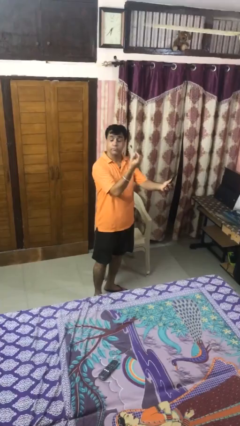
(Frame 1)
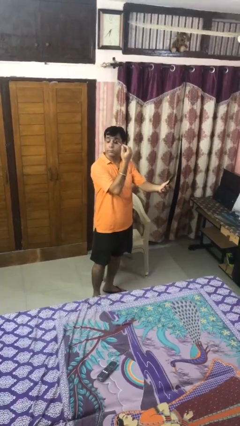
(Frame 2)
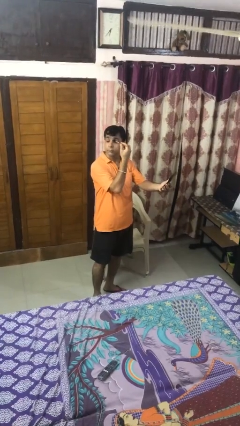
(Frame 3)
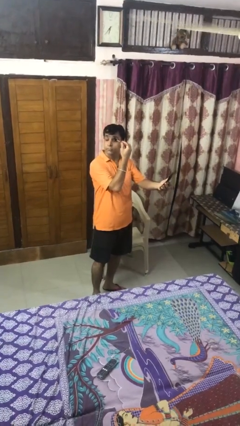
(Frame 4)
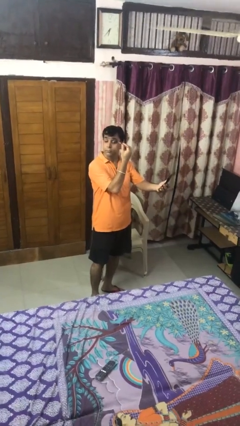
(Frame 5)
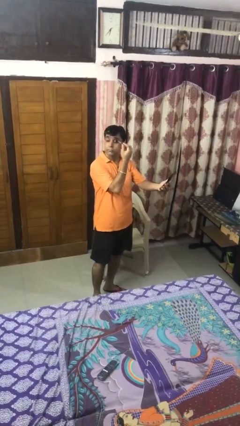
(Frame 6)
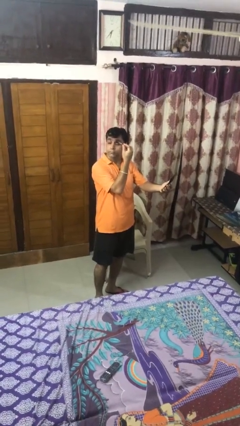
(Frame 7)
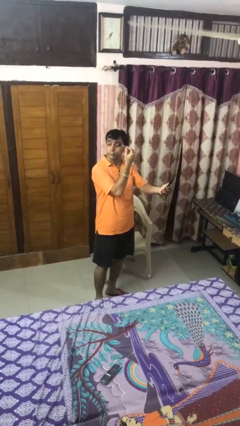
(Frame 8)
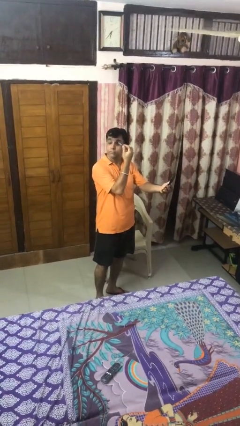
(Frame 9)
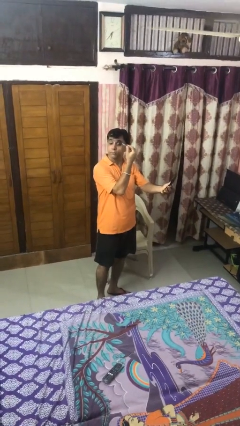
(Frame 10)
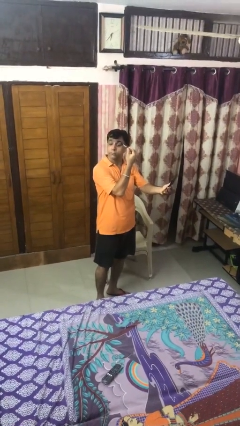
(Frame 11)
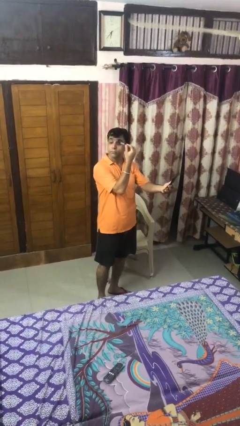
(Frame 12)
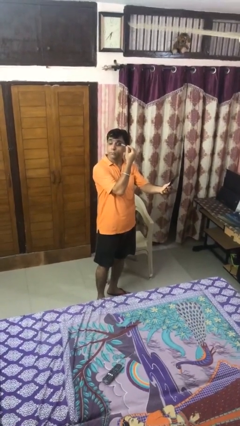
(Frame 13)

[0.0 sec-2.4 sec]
person applies eye makeup

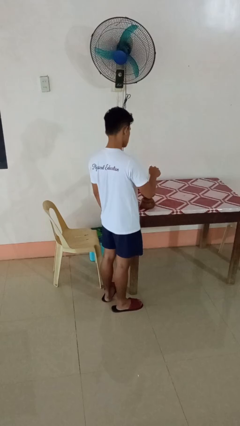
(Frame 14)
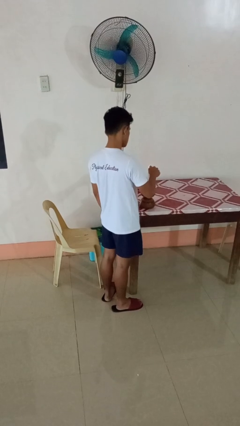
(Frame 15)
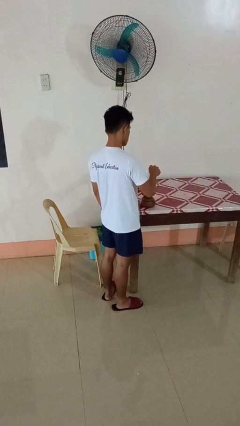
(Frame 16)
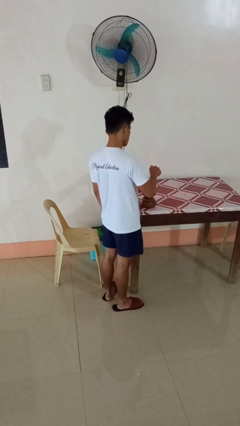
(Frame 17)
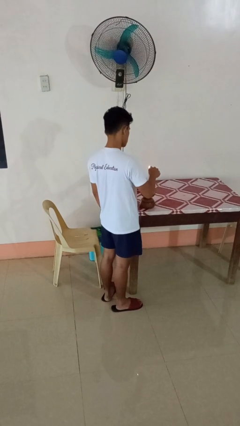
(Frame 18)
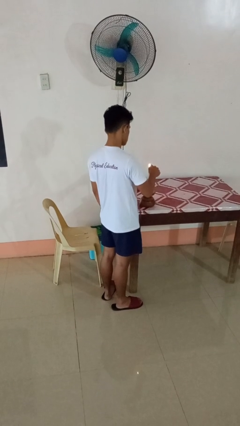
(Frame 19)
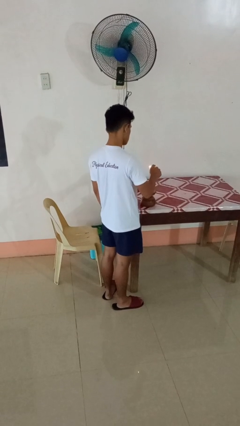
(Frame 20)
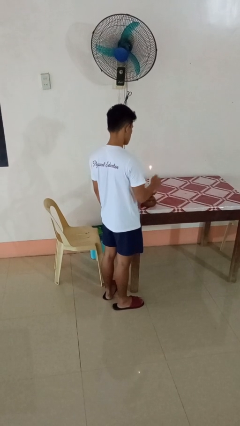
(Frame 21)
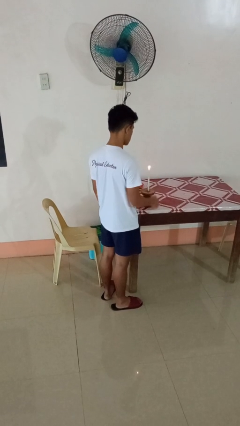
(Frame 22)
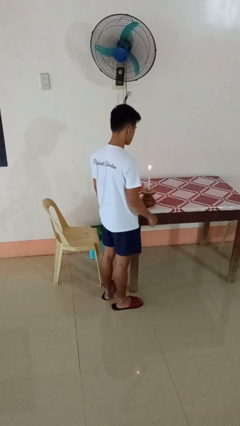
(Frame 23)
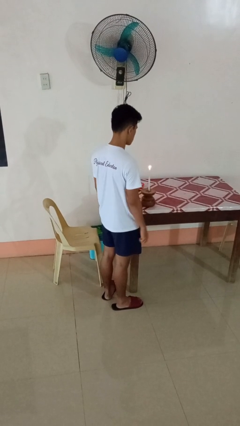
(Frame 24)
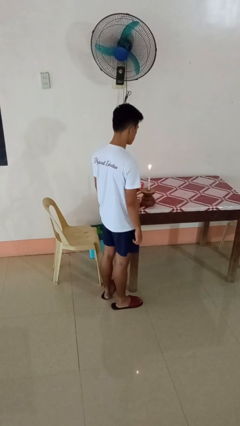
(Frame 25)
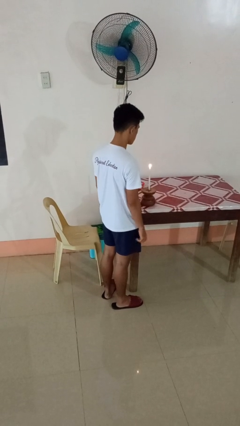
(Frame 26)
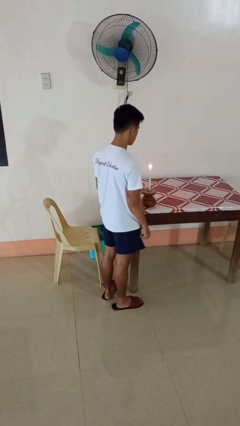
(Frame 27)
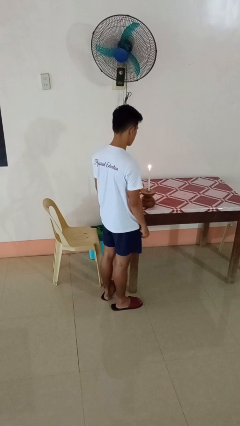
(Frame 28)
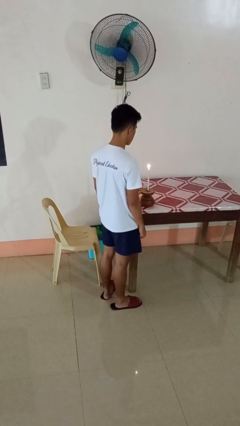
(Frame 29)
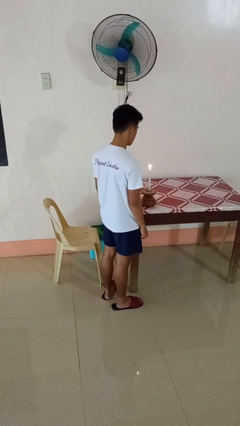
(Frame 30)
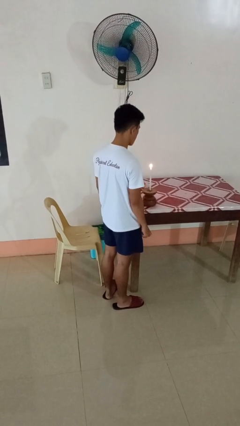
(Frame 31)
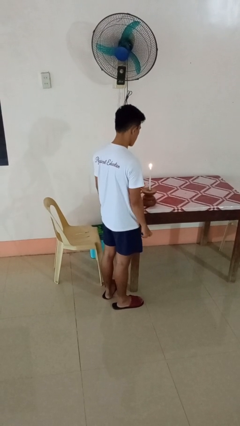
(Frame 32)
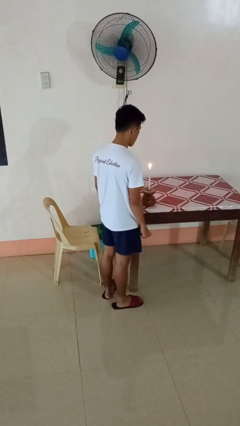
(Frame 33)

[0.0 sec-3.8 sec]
person lights candle

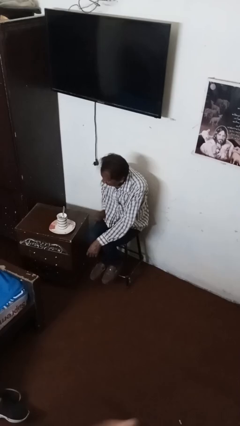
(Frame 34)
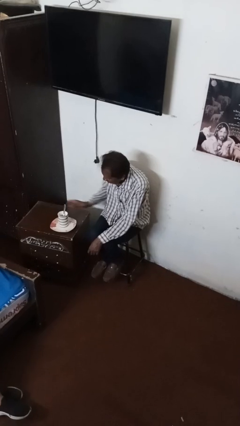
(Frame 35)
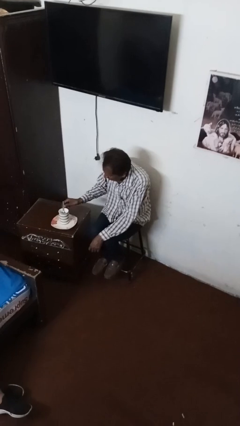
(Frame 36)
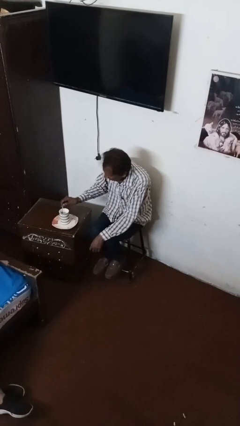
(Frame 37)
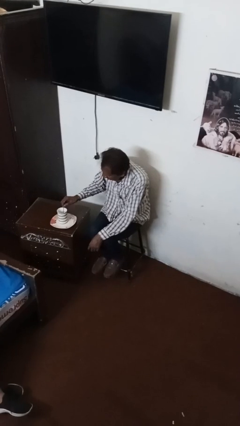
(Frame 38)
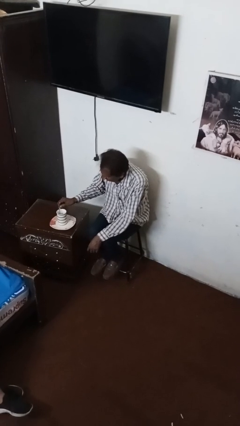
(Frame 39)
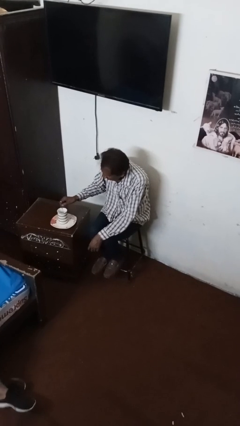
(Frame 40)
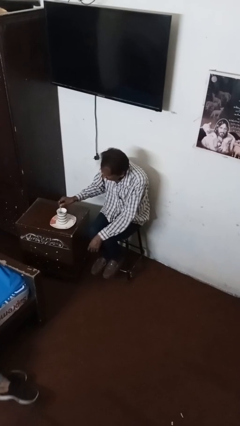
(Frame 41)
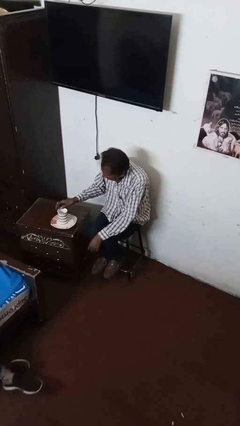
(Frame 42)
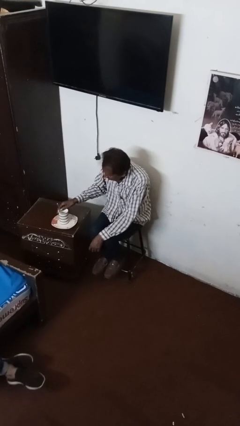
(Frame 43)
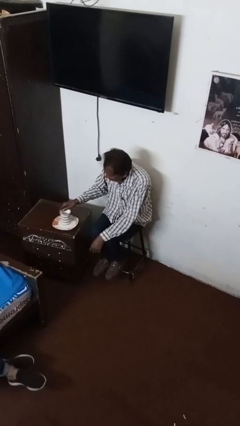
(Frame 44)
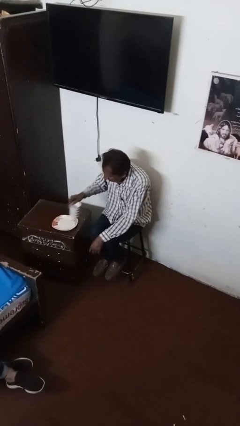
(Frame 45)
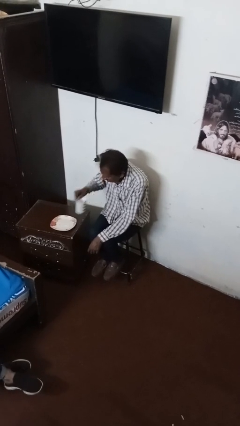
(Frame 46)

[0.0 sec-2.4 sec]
person stirs mug

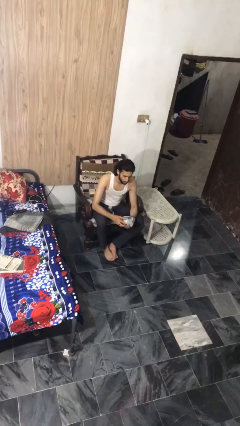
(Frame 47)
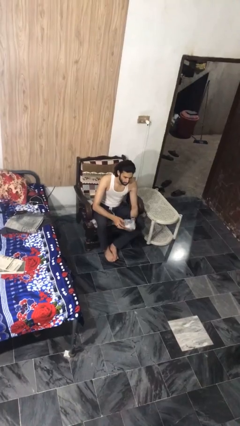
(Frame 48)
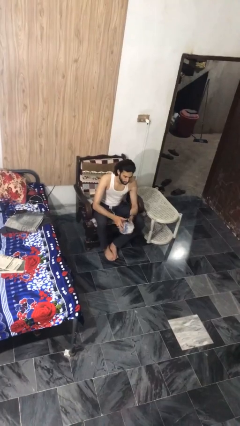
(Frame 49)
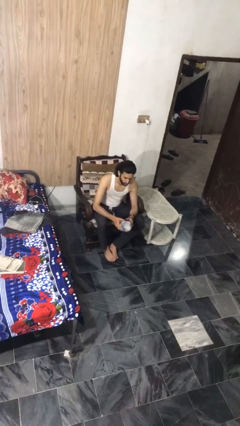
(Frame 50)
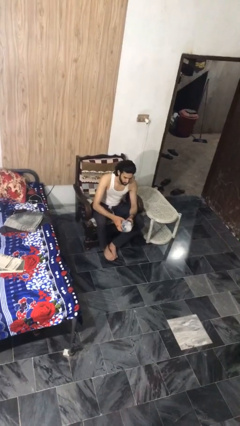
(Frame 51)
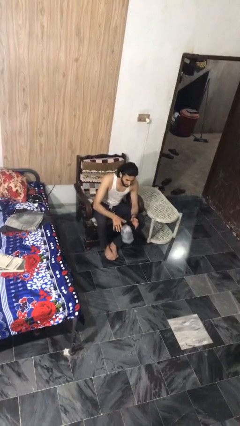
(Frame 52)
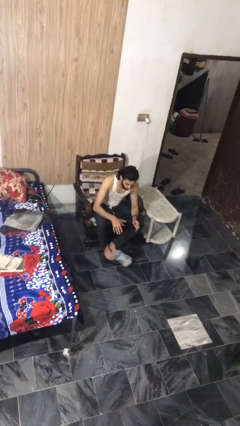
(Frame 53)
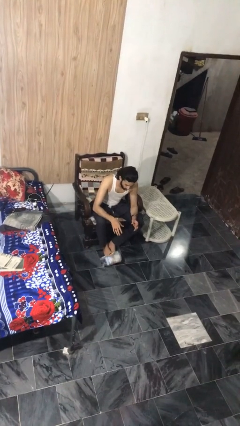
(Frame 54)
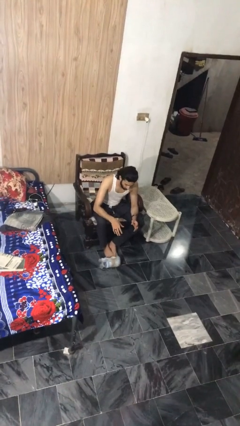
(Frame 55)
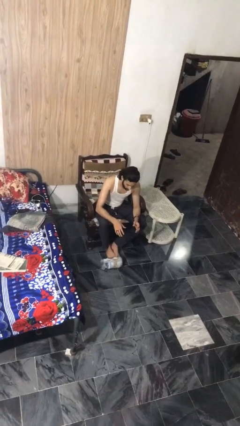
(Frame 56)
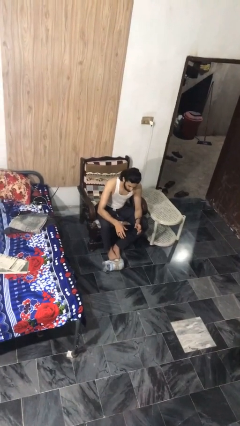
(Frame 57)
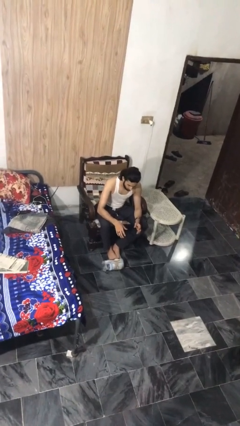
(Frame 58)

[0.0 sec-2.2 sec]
person drops object

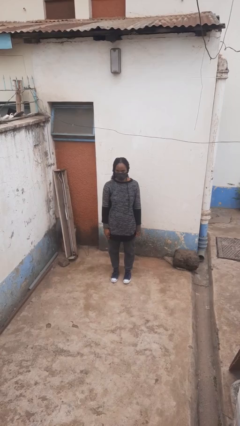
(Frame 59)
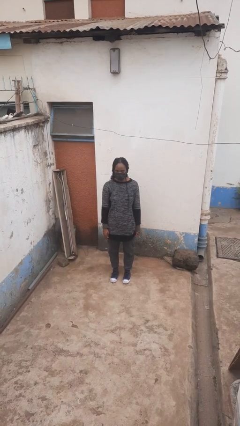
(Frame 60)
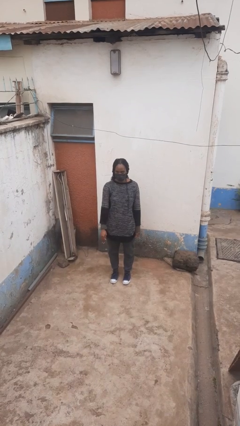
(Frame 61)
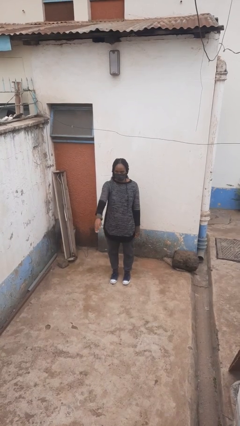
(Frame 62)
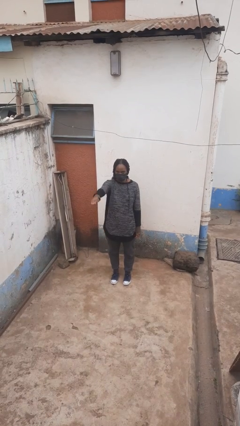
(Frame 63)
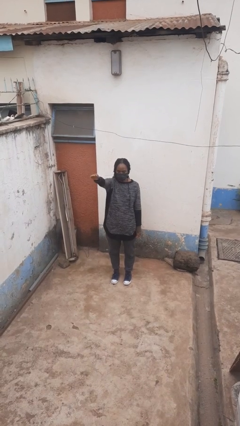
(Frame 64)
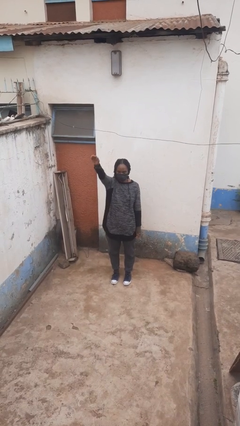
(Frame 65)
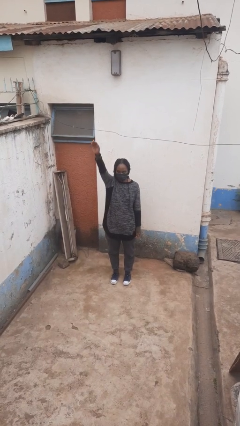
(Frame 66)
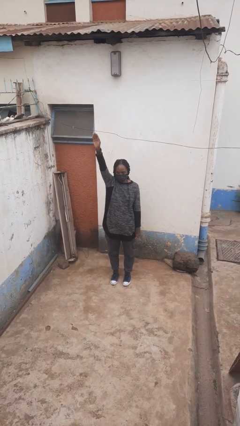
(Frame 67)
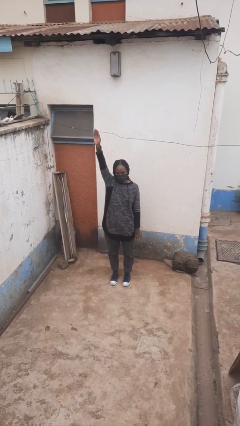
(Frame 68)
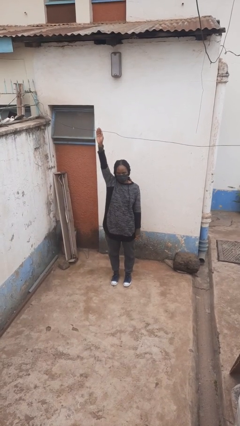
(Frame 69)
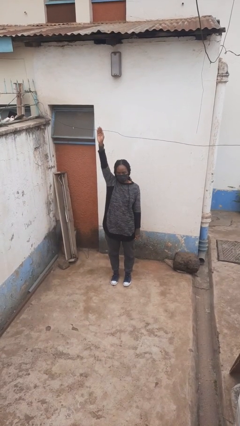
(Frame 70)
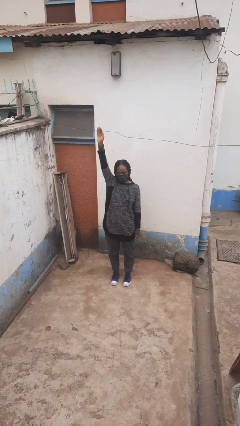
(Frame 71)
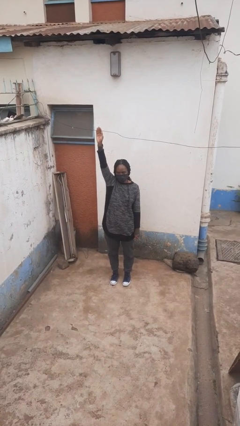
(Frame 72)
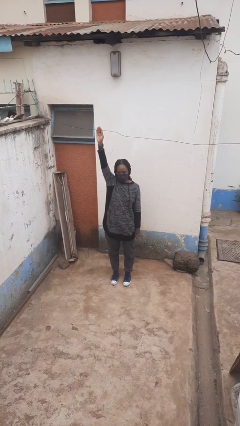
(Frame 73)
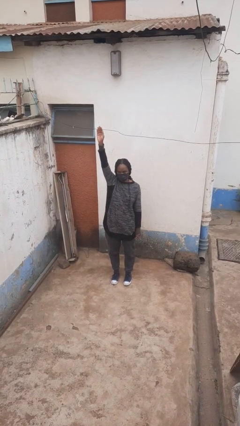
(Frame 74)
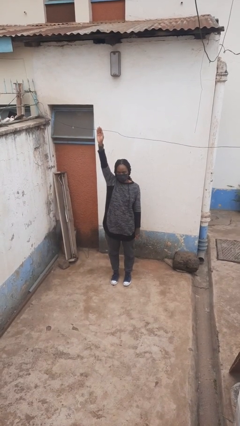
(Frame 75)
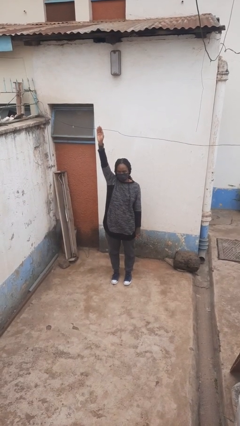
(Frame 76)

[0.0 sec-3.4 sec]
person gestures raise hand

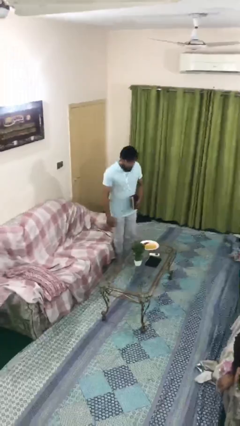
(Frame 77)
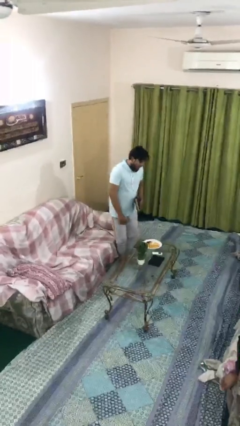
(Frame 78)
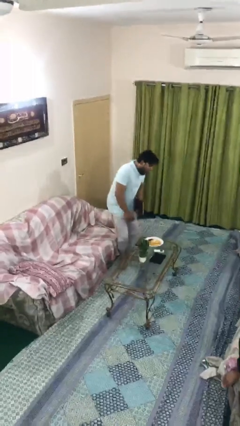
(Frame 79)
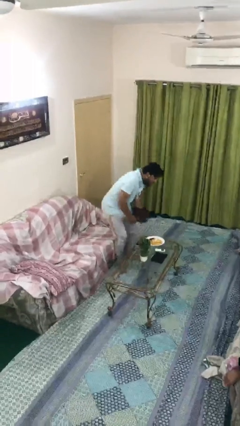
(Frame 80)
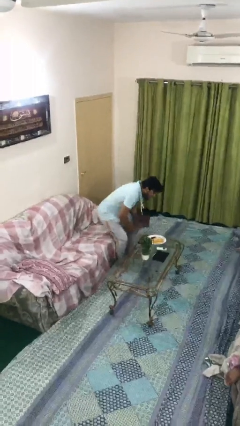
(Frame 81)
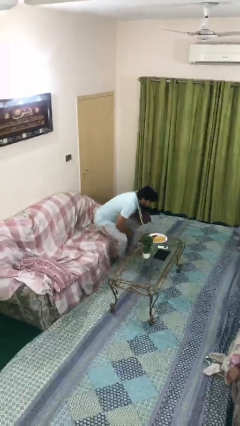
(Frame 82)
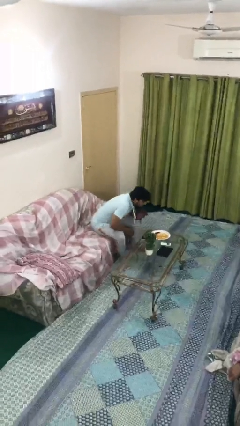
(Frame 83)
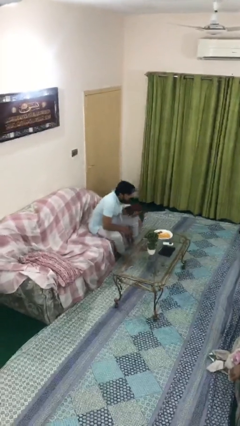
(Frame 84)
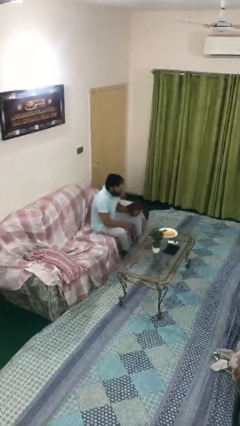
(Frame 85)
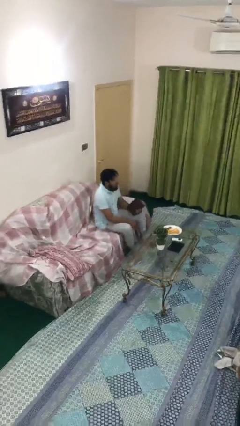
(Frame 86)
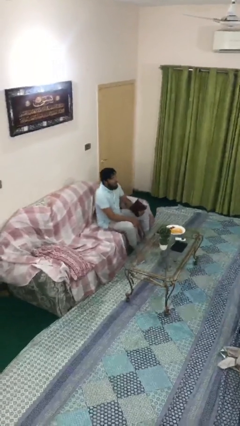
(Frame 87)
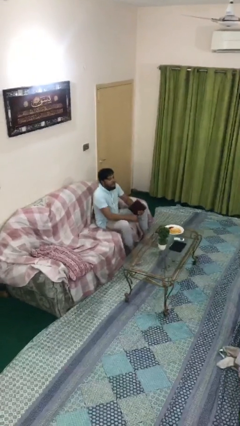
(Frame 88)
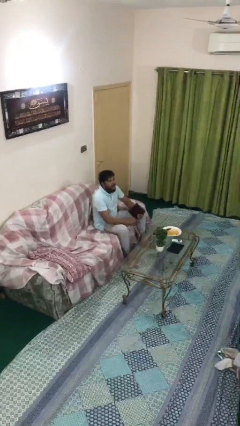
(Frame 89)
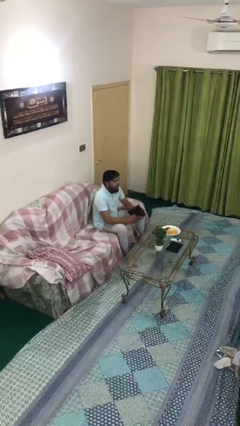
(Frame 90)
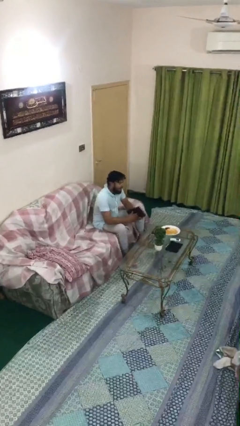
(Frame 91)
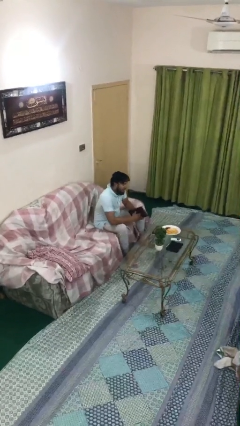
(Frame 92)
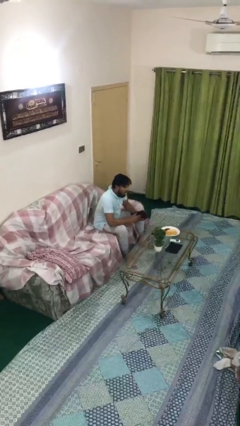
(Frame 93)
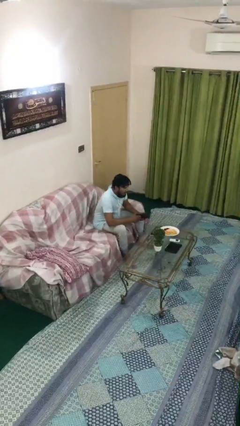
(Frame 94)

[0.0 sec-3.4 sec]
person sits down
